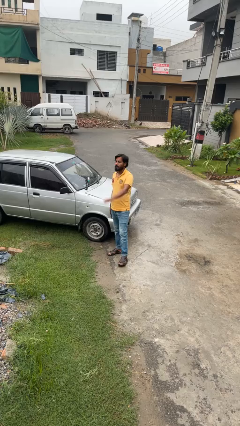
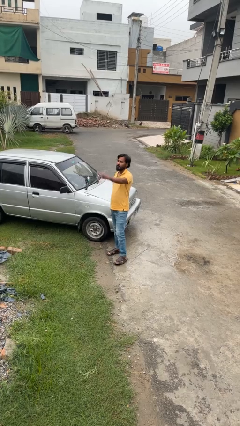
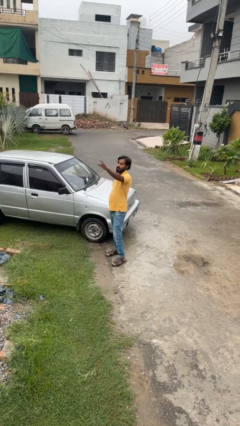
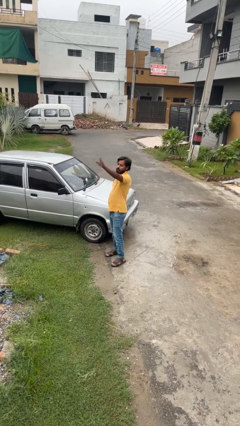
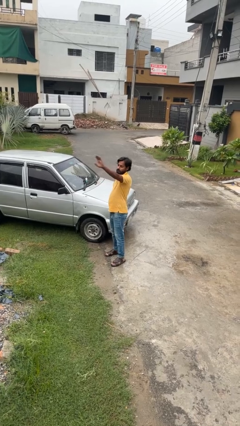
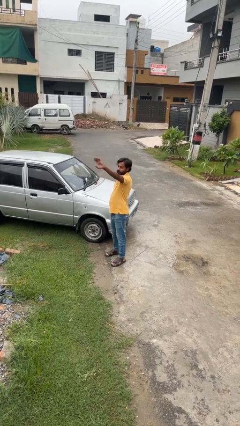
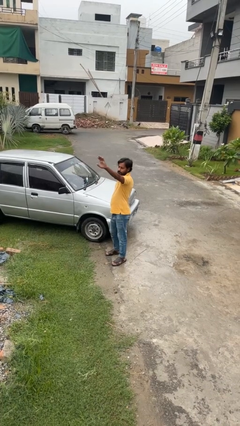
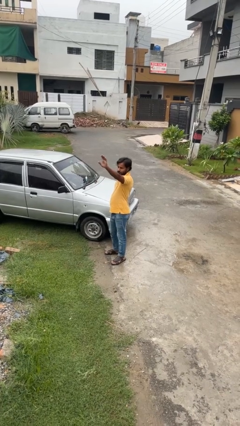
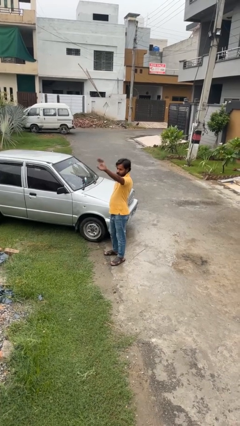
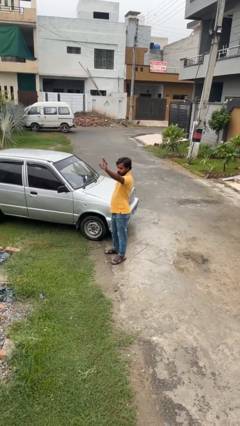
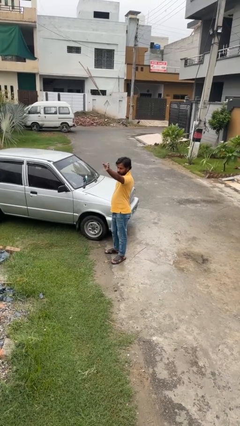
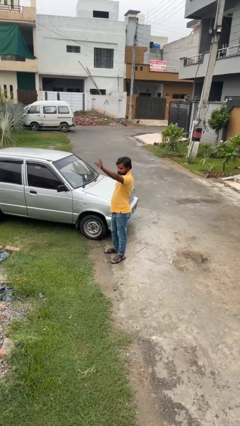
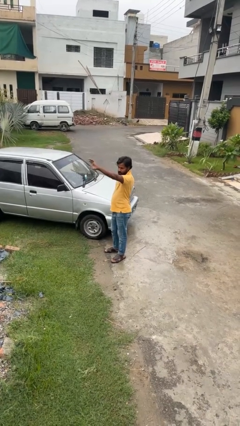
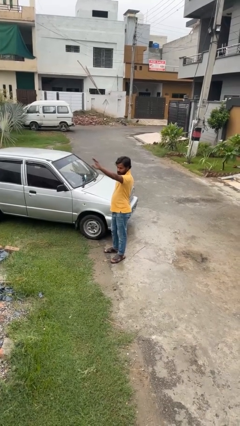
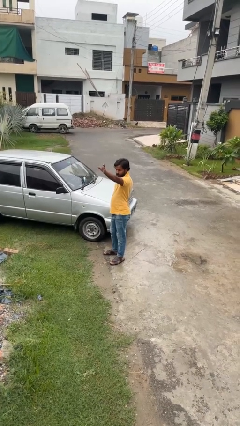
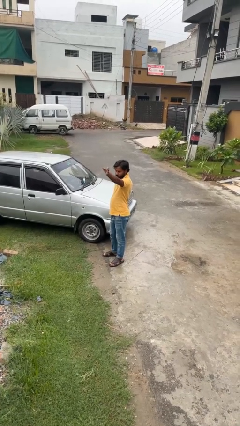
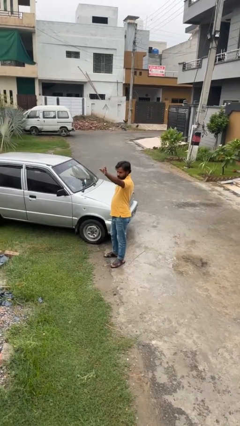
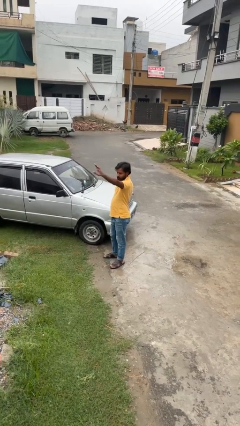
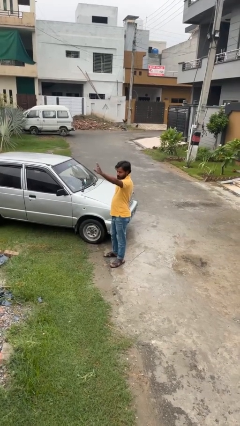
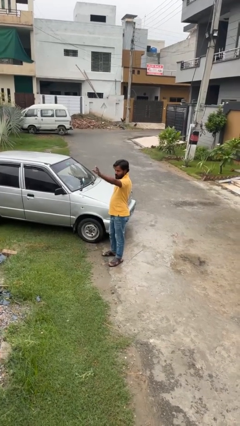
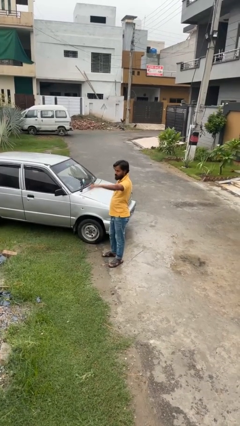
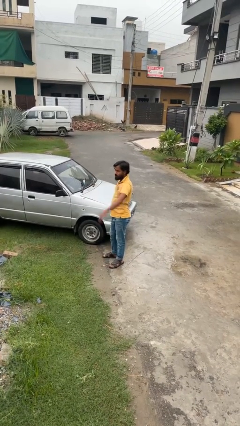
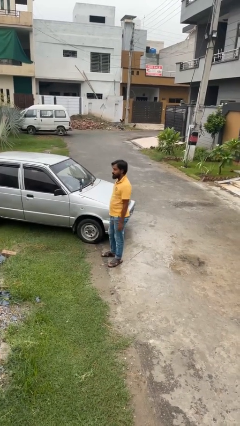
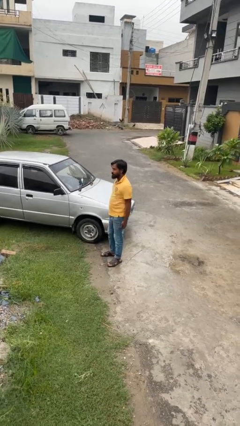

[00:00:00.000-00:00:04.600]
person waves at person

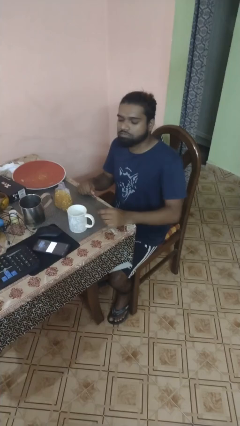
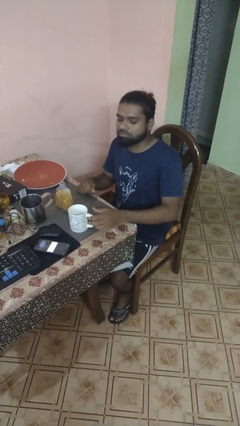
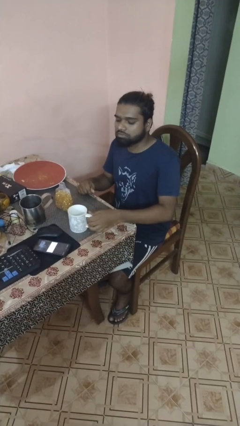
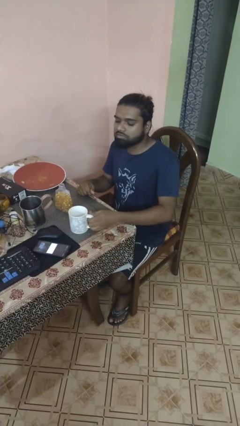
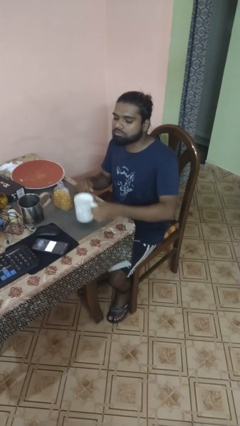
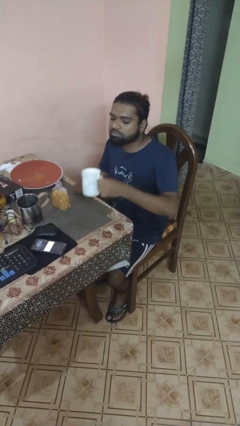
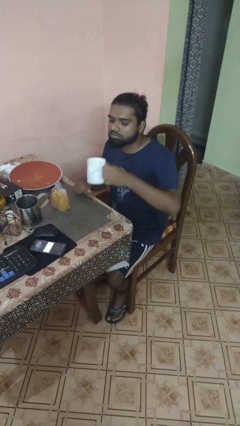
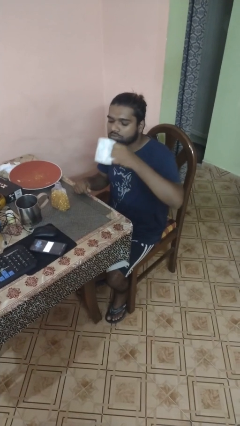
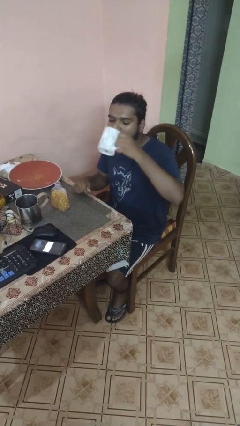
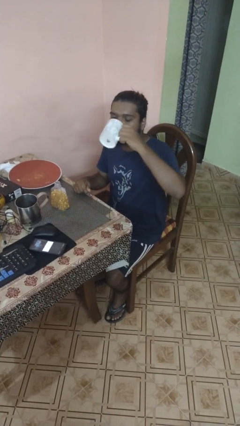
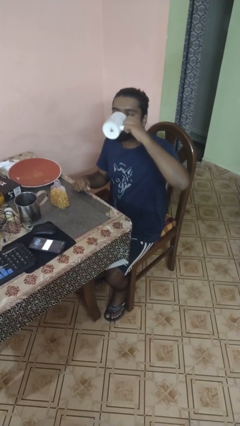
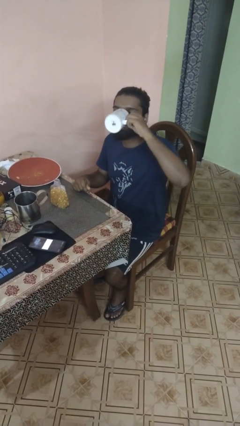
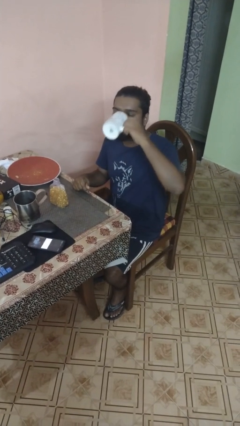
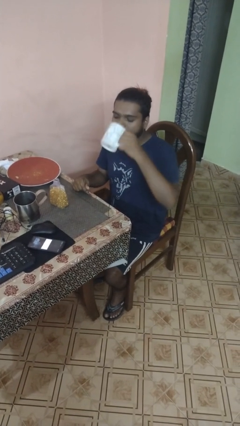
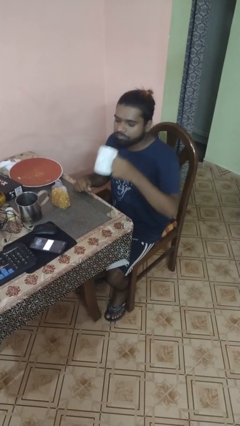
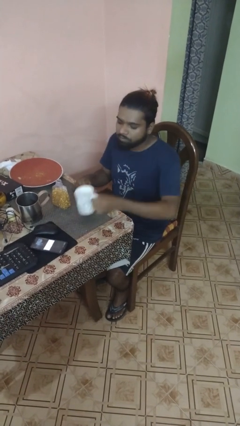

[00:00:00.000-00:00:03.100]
person drinks from cup

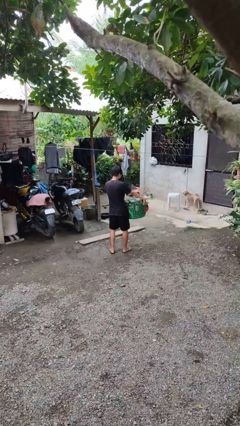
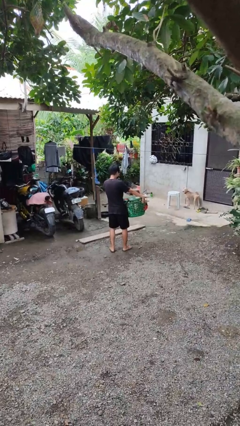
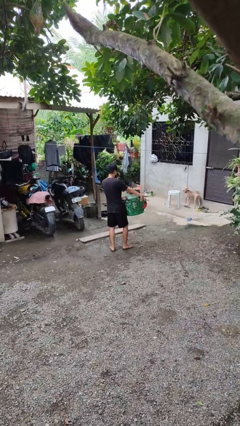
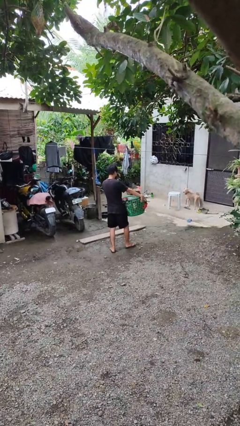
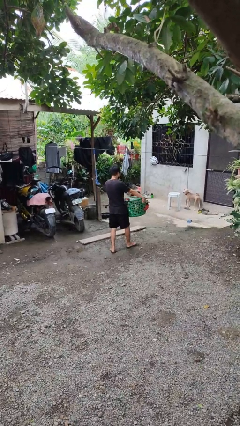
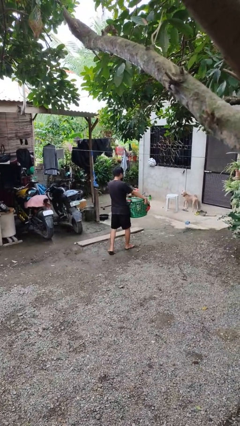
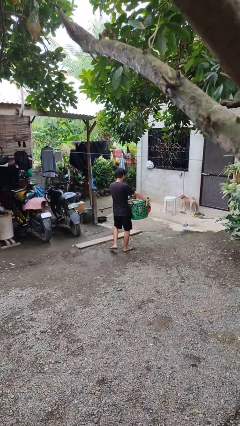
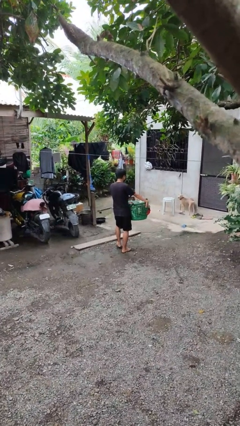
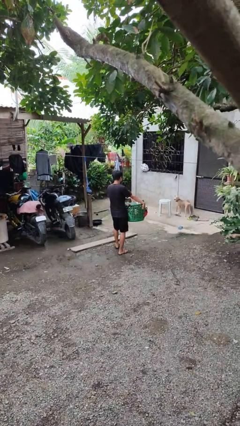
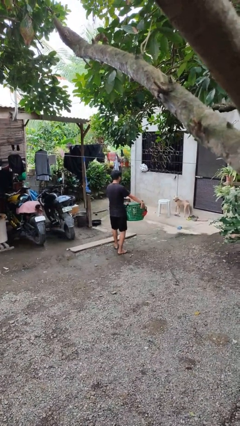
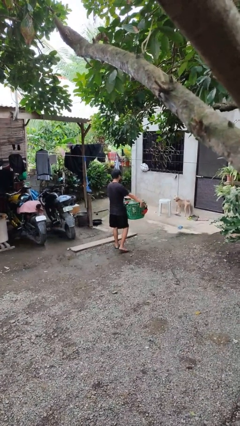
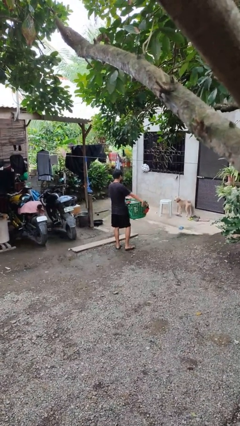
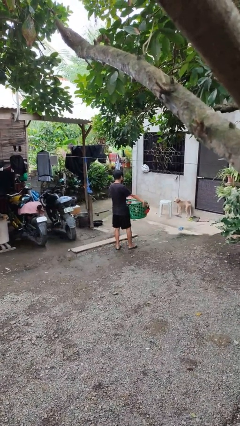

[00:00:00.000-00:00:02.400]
person carries laundry basket

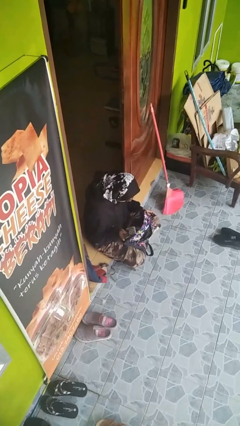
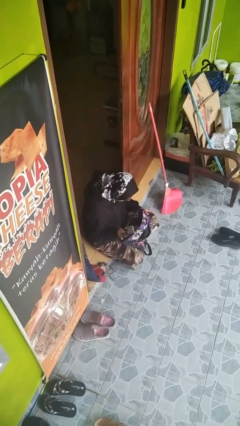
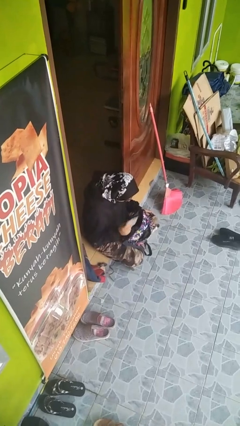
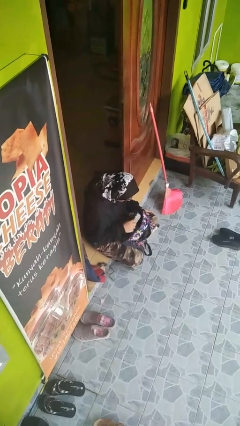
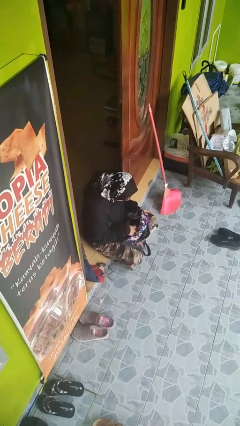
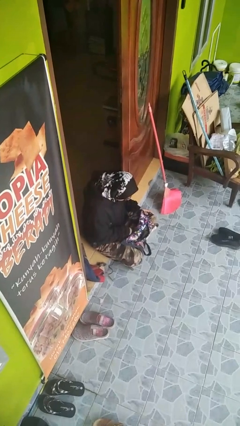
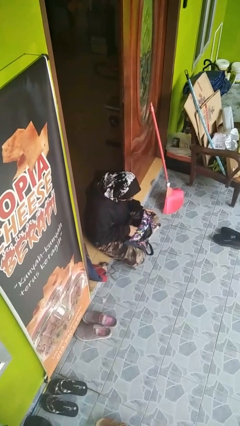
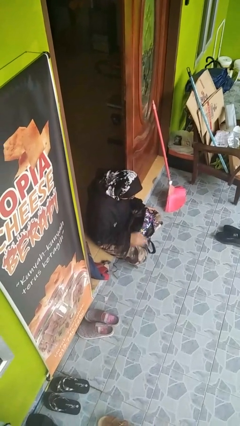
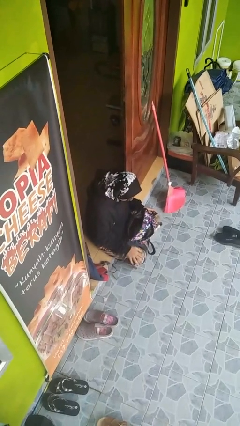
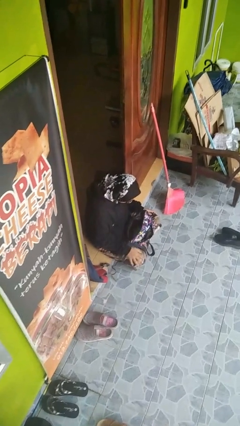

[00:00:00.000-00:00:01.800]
person puts object into purse

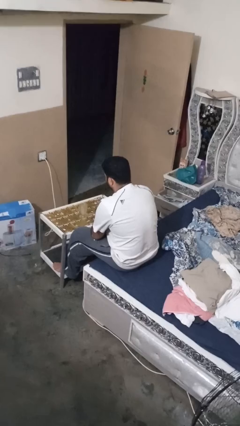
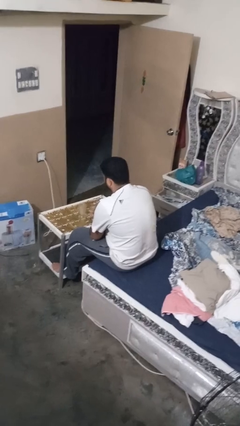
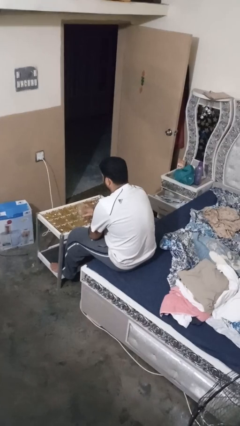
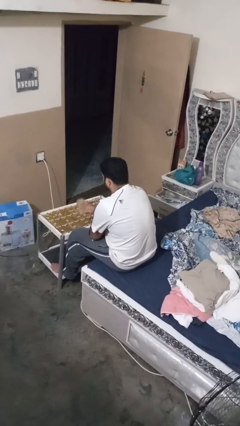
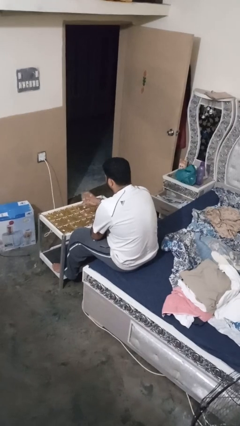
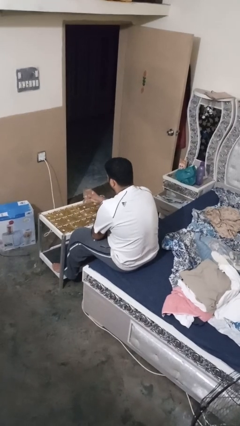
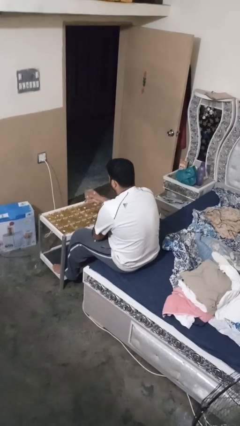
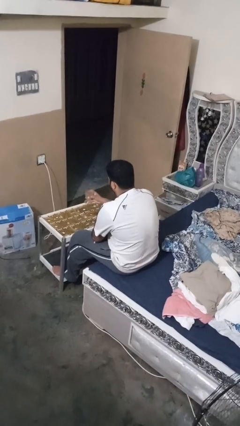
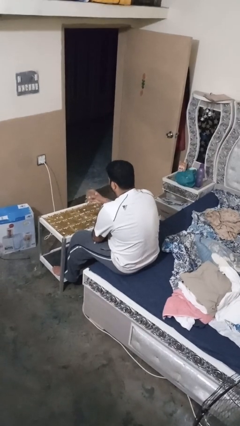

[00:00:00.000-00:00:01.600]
person picks up object from table

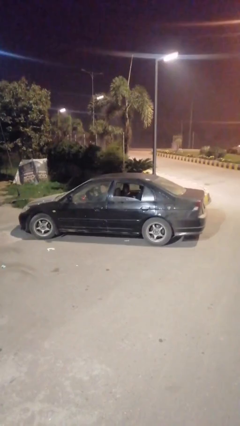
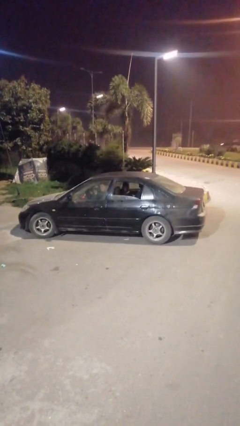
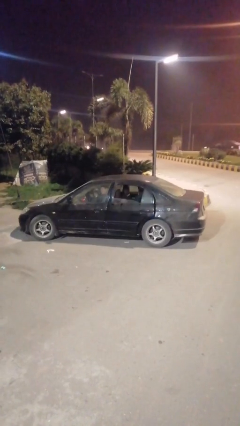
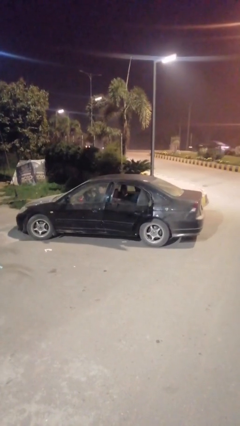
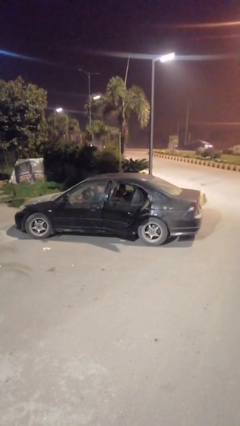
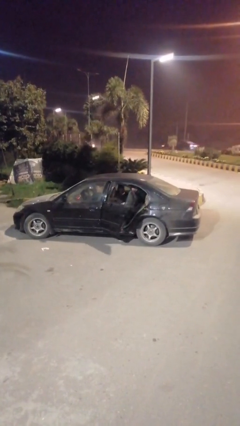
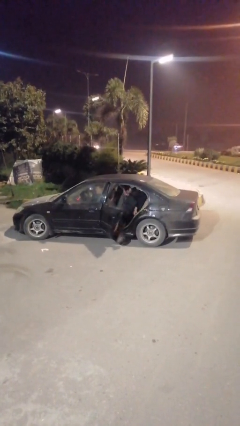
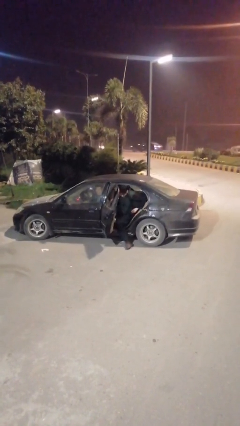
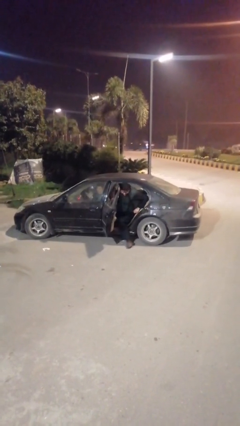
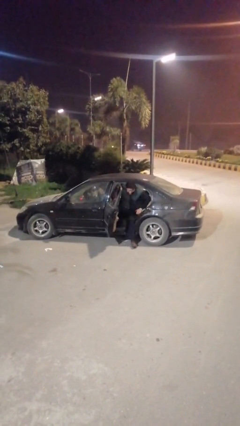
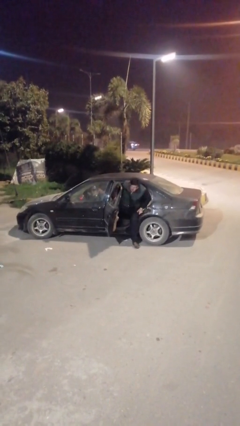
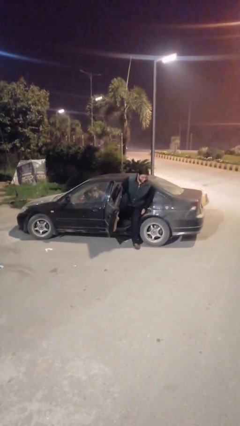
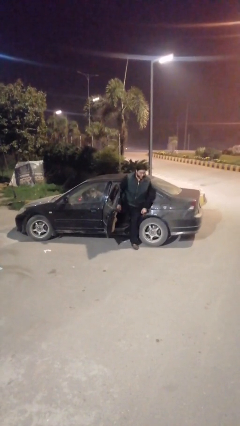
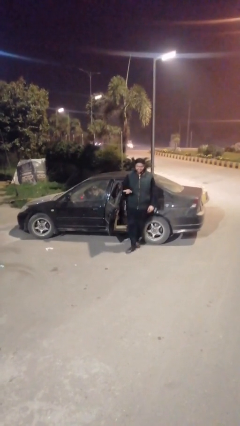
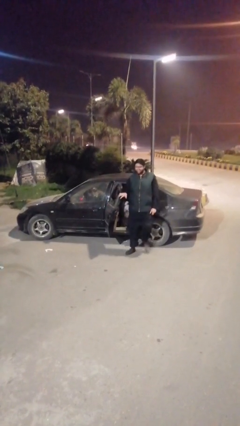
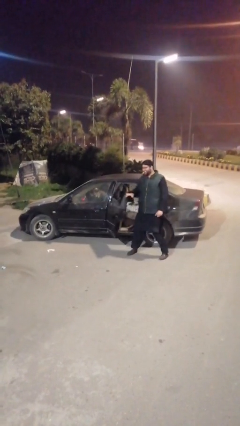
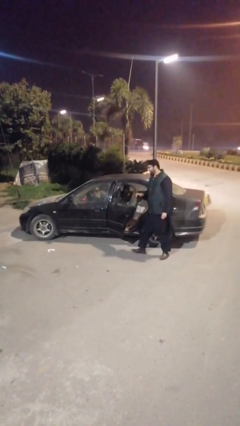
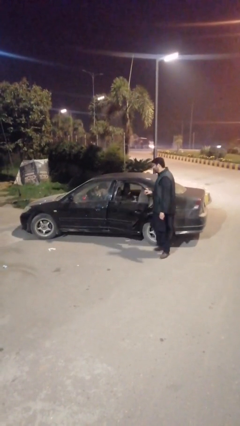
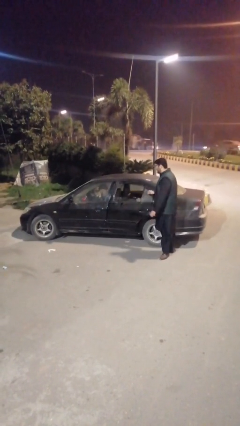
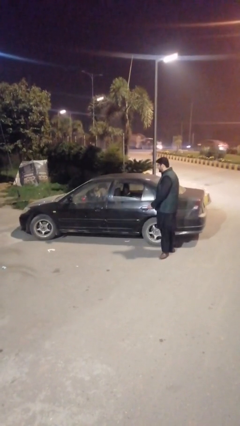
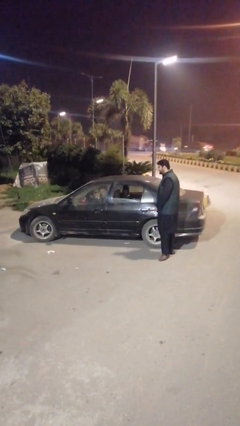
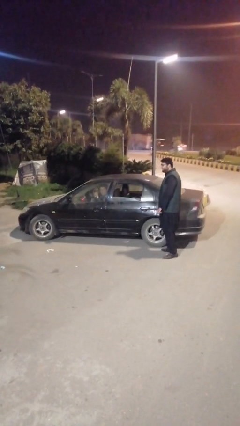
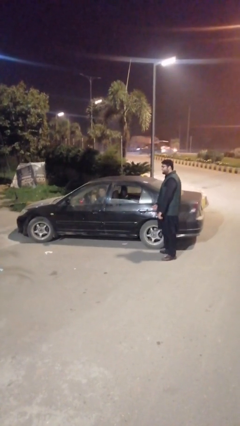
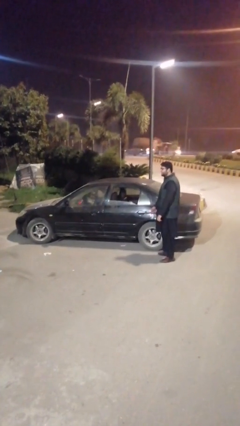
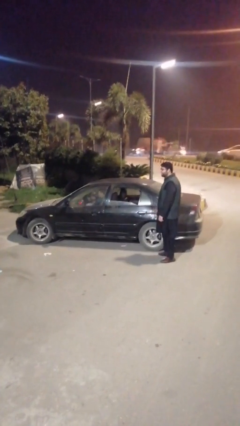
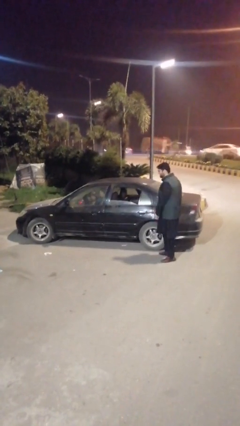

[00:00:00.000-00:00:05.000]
car drops off person
